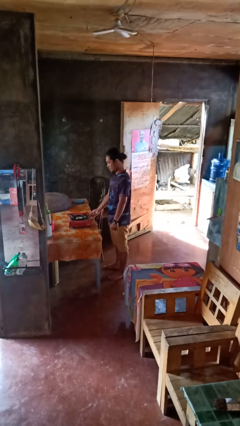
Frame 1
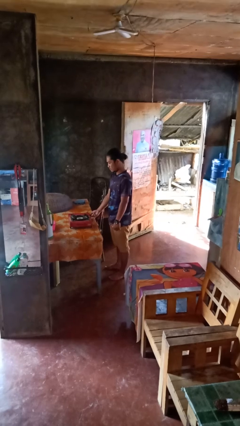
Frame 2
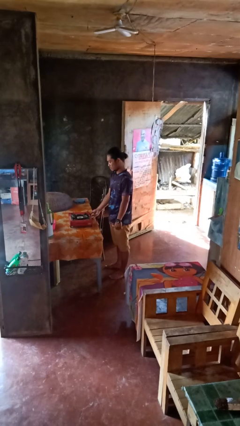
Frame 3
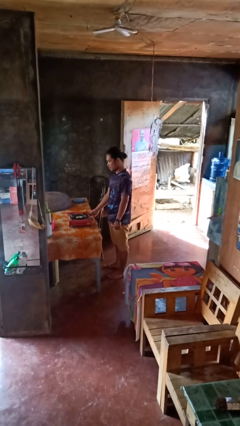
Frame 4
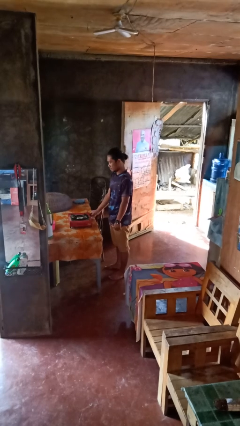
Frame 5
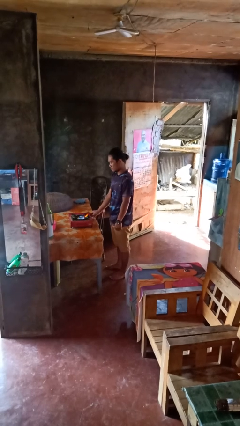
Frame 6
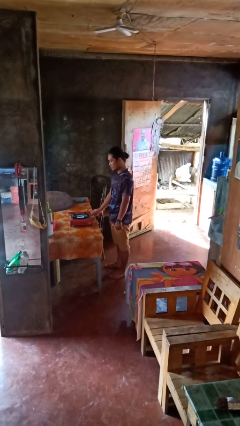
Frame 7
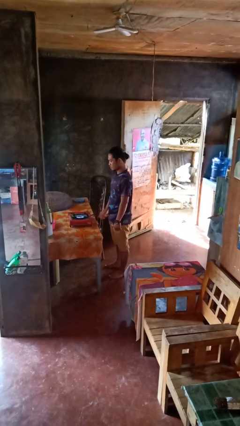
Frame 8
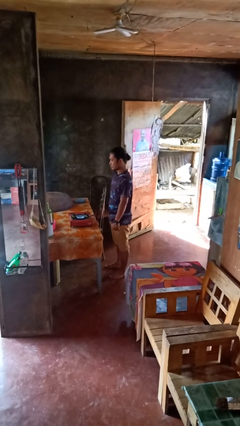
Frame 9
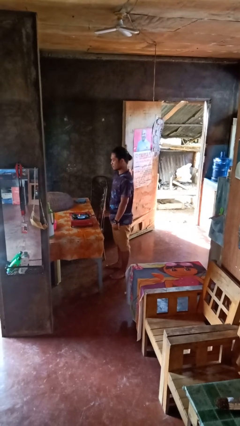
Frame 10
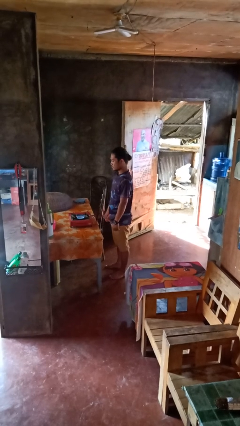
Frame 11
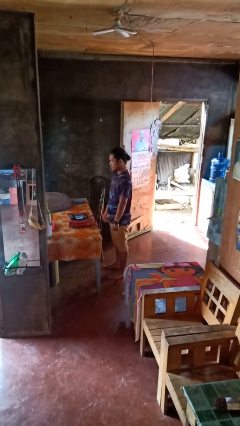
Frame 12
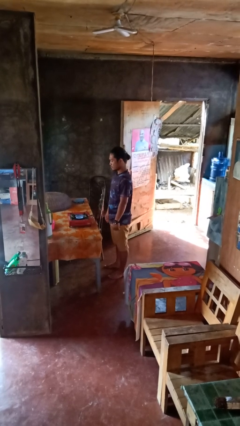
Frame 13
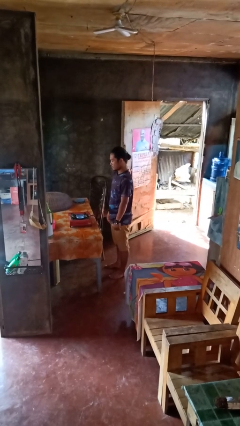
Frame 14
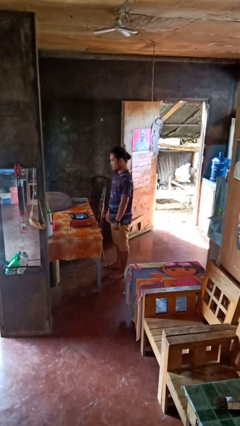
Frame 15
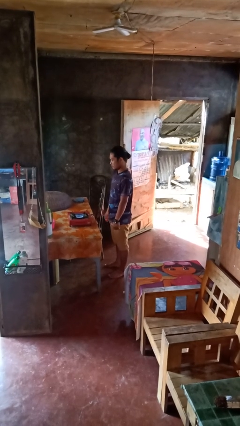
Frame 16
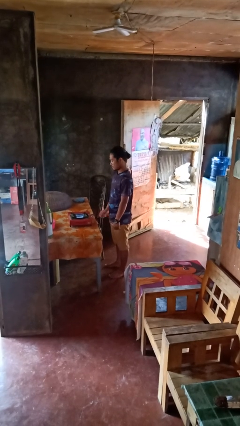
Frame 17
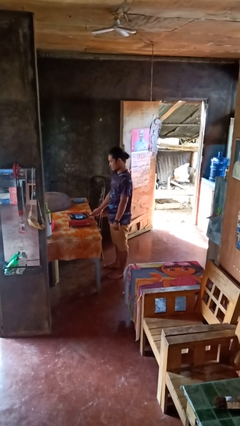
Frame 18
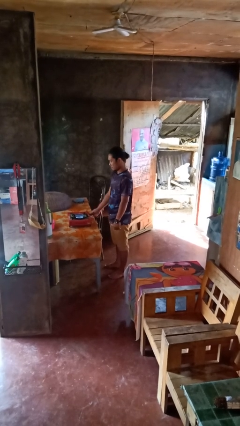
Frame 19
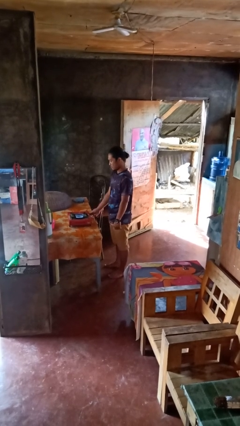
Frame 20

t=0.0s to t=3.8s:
person turns on stovetop

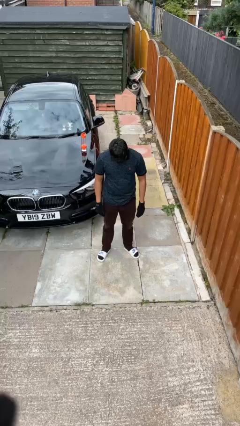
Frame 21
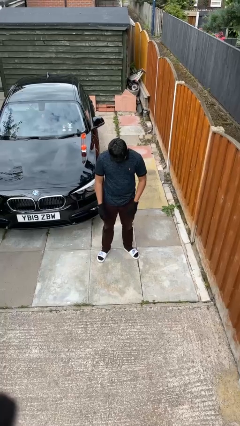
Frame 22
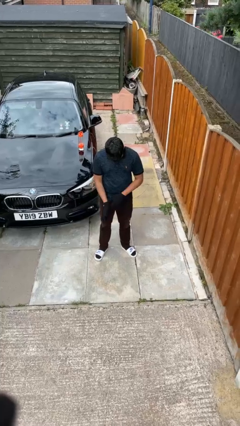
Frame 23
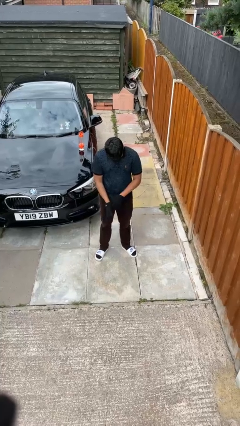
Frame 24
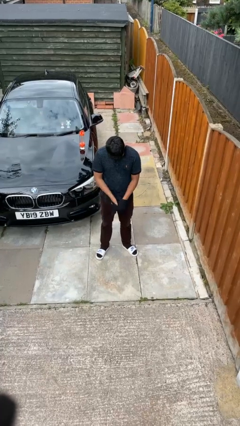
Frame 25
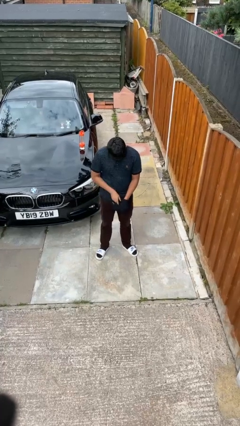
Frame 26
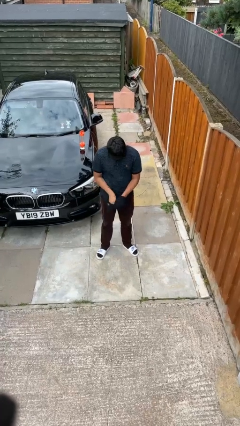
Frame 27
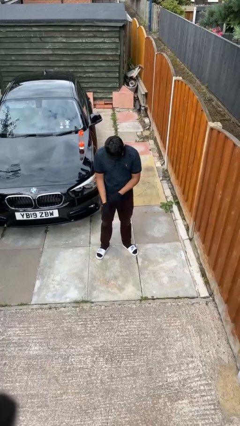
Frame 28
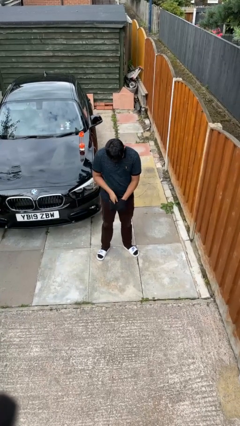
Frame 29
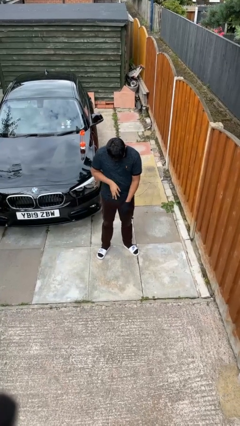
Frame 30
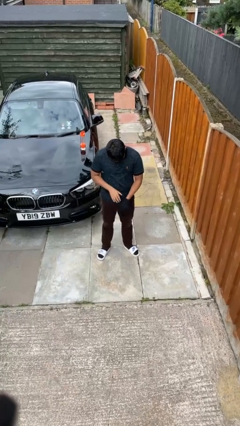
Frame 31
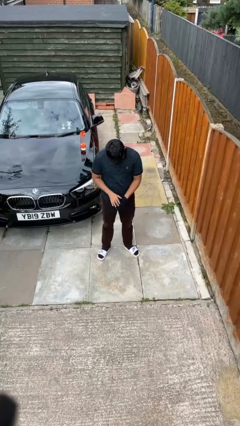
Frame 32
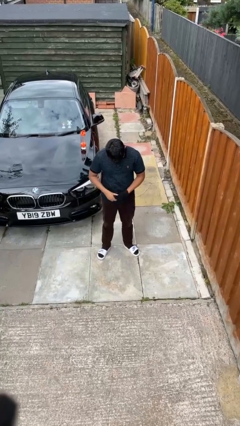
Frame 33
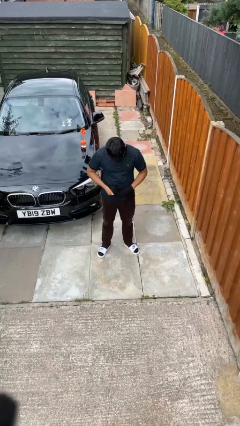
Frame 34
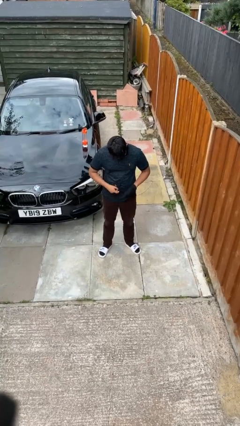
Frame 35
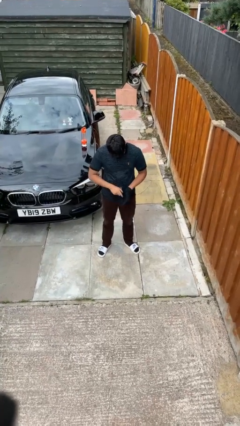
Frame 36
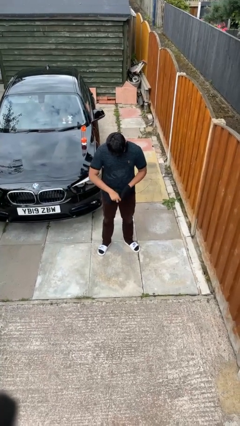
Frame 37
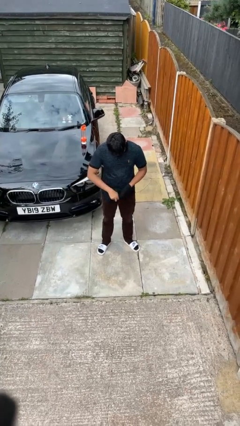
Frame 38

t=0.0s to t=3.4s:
person takes off gloves

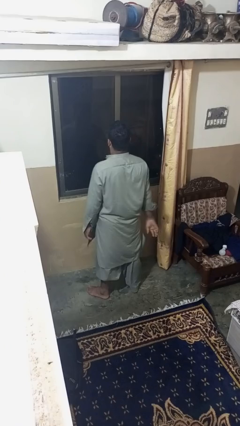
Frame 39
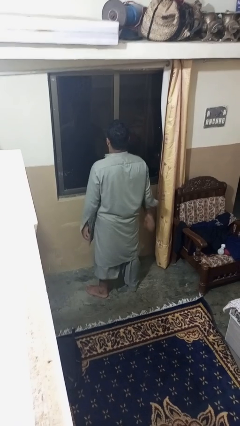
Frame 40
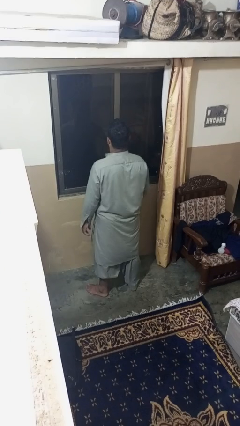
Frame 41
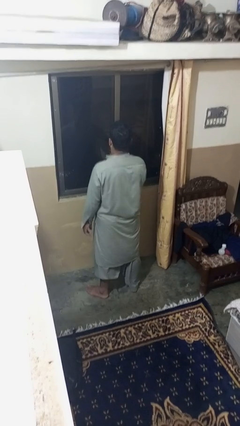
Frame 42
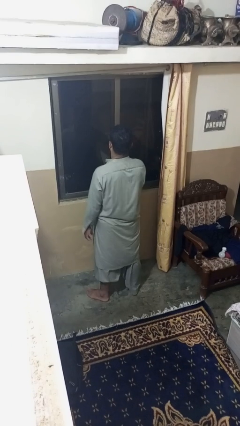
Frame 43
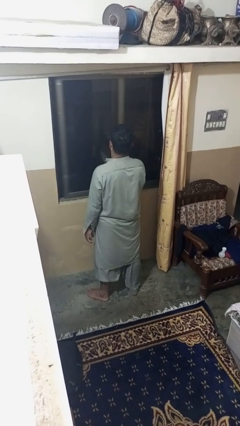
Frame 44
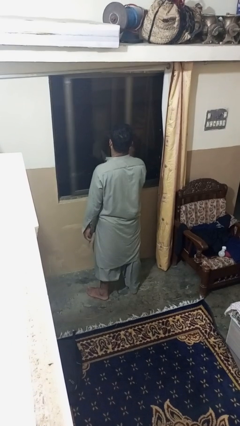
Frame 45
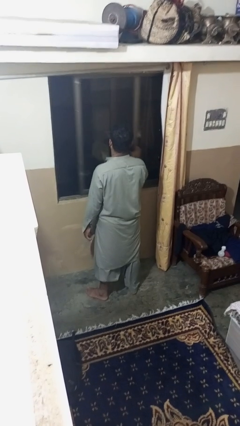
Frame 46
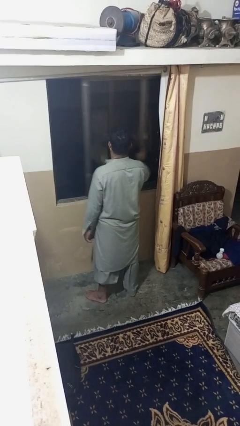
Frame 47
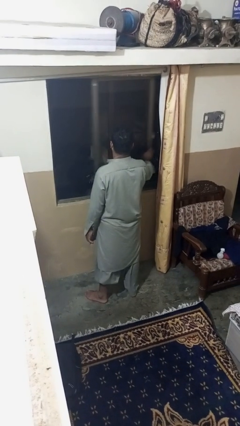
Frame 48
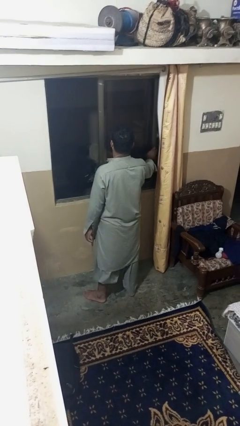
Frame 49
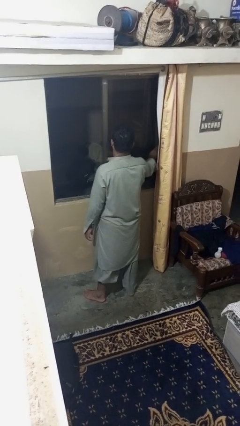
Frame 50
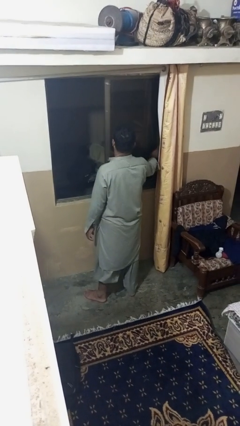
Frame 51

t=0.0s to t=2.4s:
person opens home window

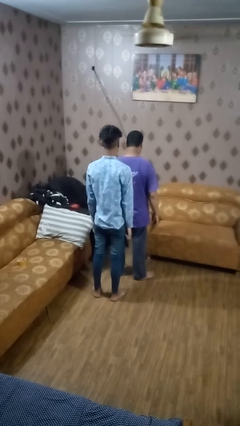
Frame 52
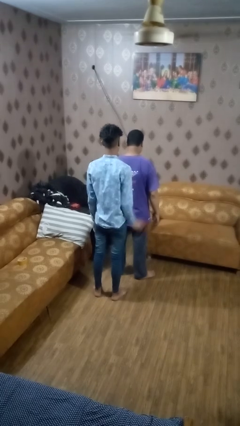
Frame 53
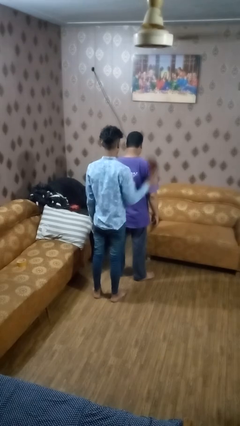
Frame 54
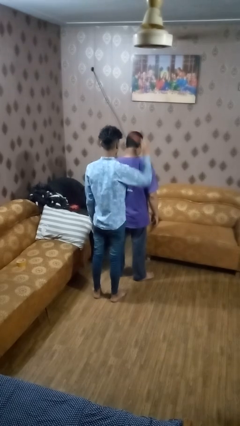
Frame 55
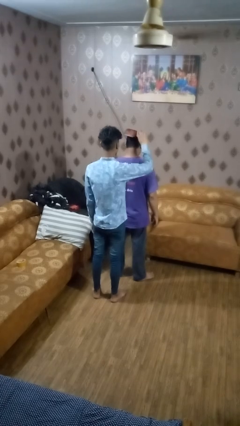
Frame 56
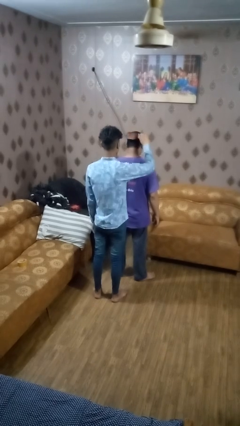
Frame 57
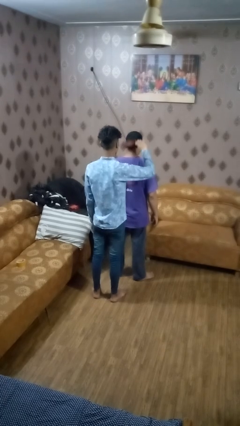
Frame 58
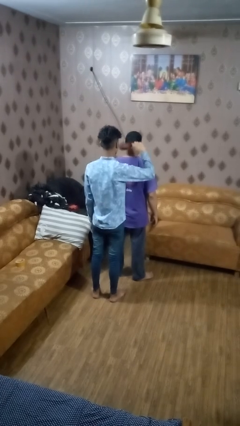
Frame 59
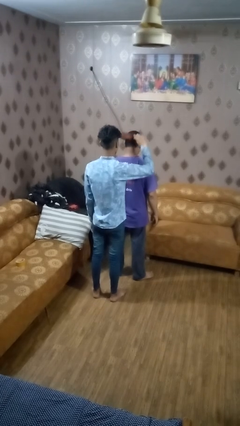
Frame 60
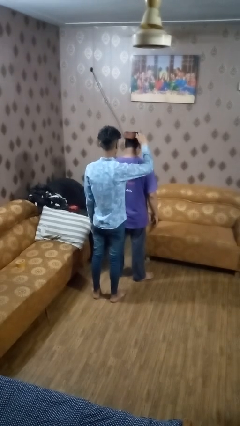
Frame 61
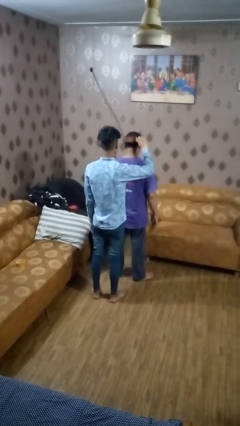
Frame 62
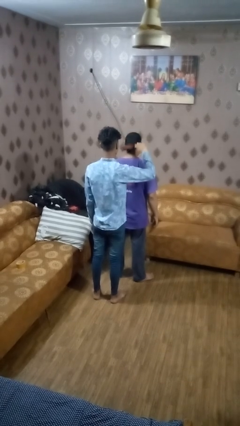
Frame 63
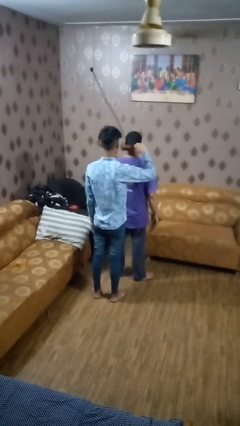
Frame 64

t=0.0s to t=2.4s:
person brushes hair of person

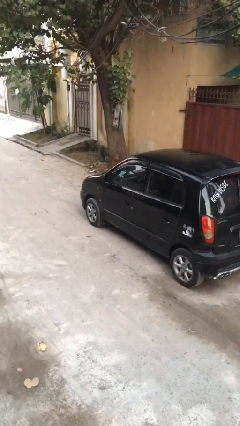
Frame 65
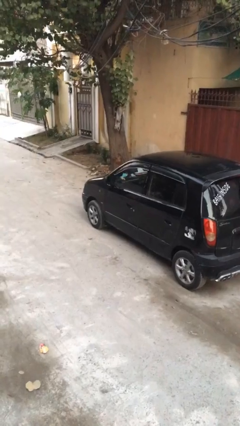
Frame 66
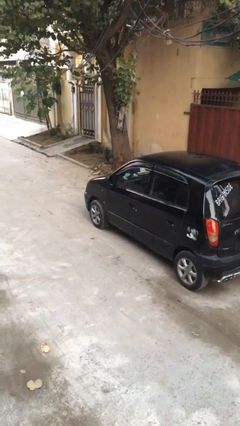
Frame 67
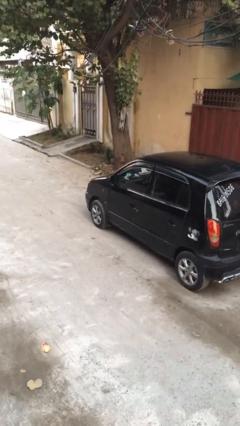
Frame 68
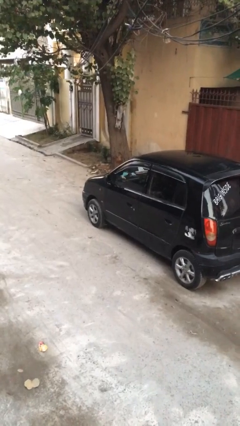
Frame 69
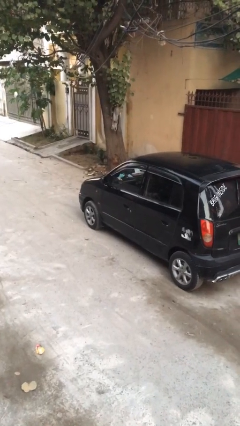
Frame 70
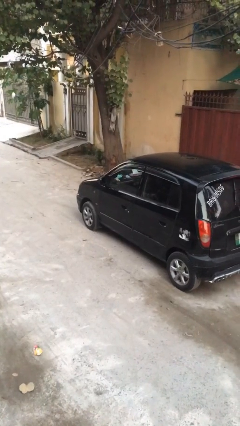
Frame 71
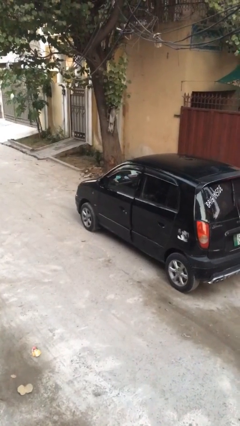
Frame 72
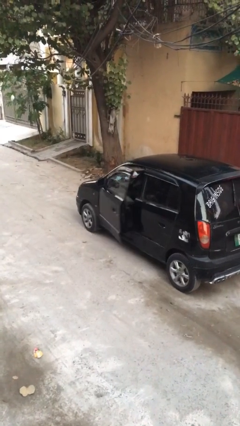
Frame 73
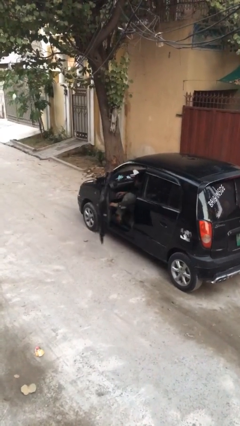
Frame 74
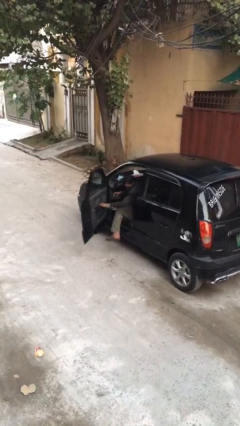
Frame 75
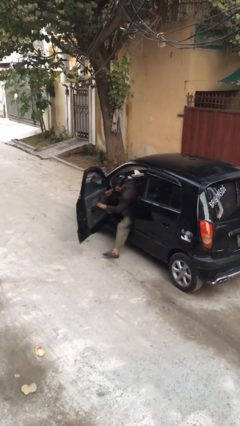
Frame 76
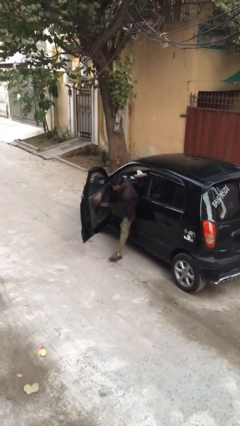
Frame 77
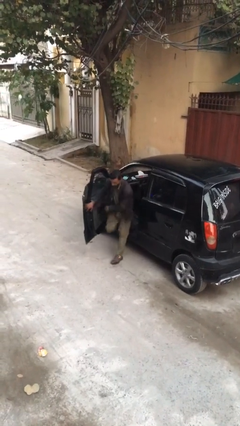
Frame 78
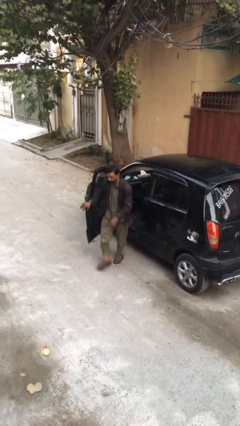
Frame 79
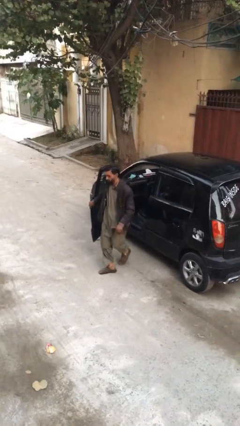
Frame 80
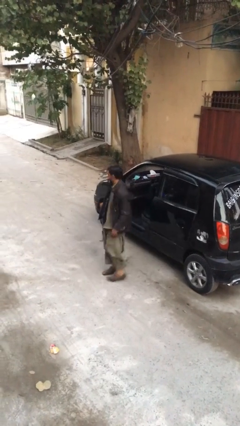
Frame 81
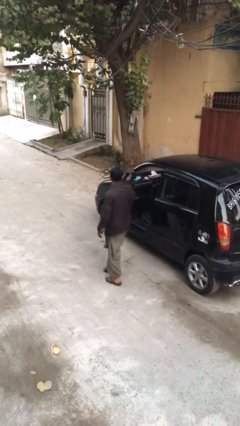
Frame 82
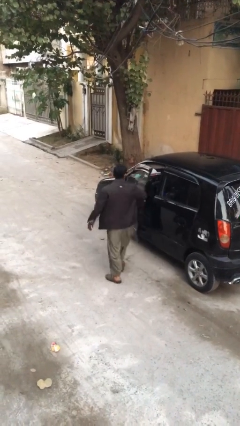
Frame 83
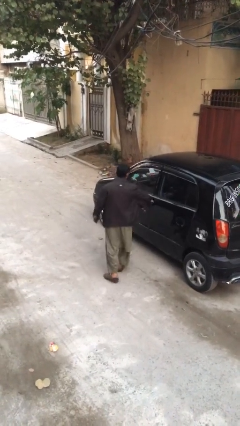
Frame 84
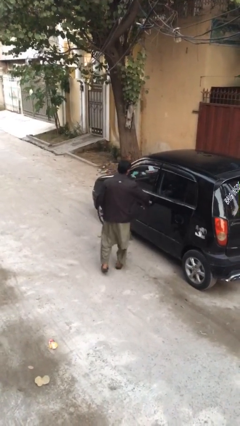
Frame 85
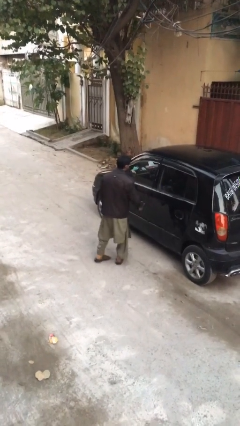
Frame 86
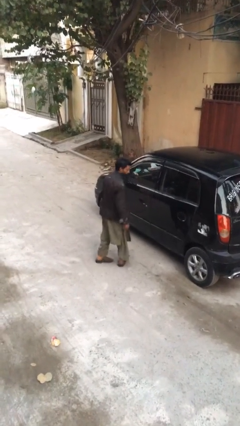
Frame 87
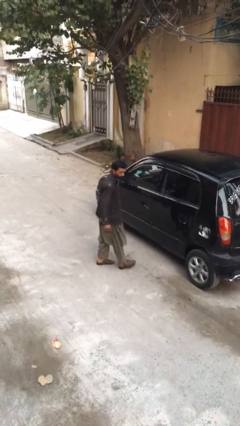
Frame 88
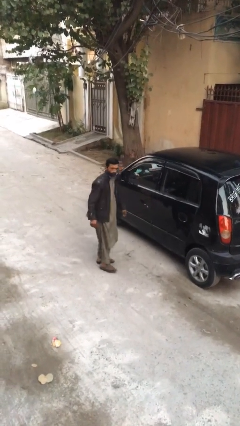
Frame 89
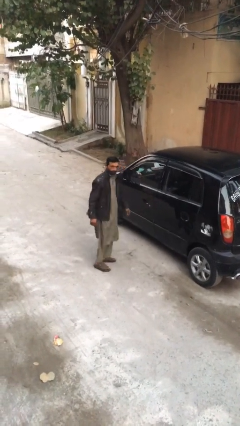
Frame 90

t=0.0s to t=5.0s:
car drops off person

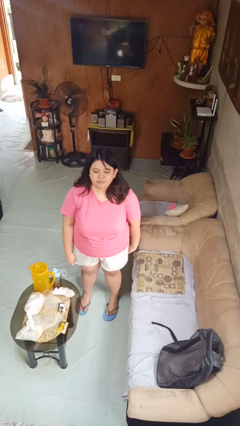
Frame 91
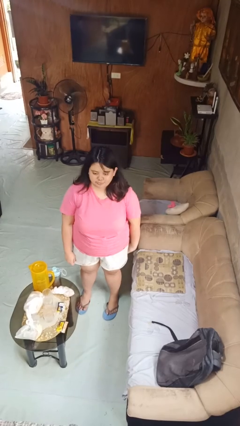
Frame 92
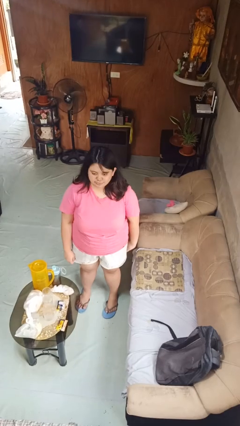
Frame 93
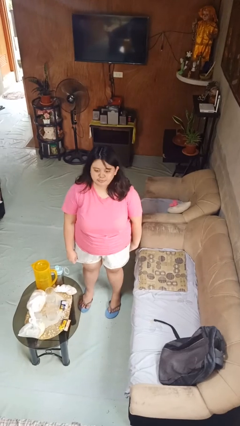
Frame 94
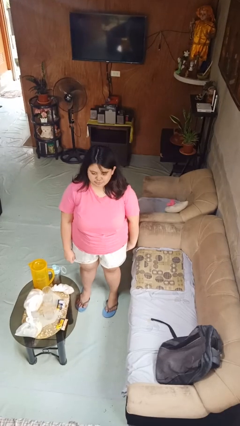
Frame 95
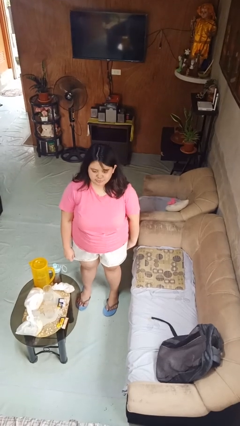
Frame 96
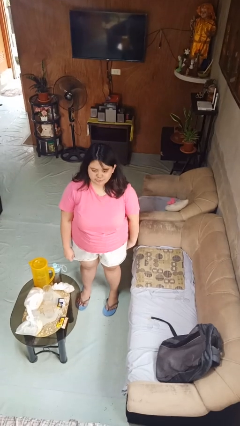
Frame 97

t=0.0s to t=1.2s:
person nods head
